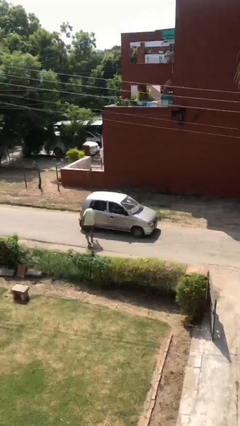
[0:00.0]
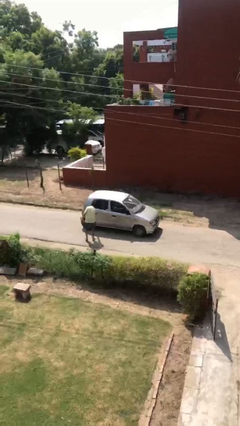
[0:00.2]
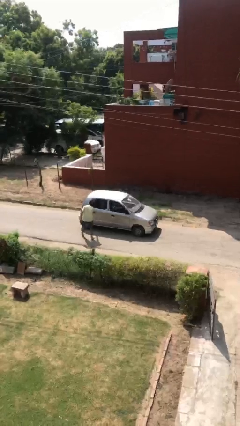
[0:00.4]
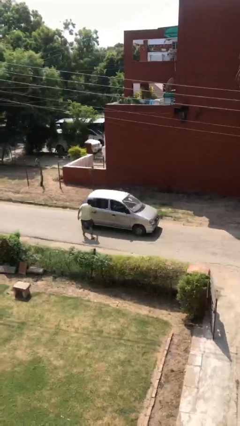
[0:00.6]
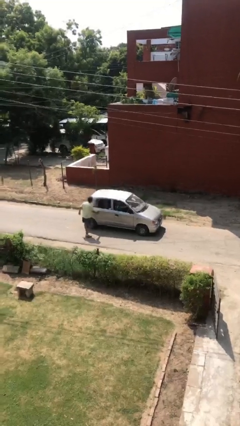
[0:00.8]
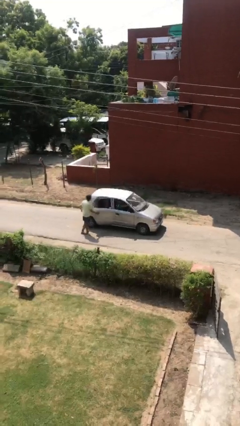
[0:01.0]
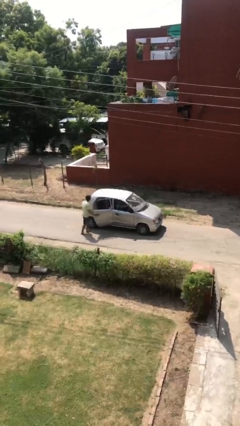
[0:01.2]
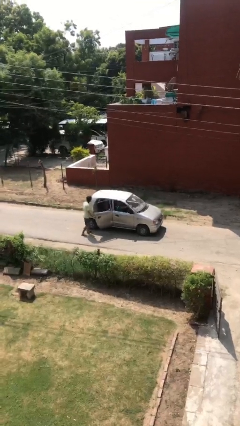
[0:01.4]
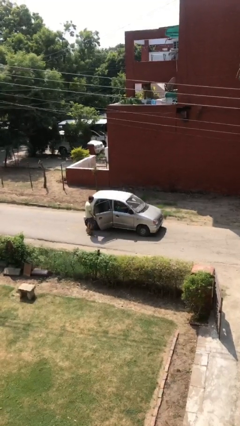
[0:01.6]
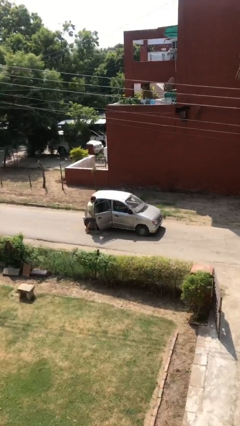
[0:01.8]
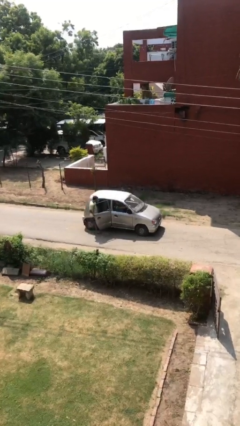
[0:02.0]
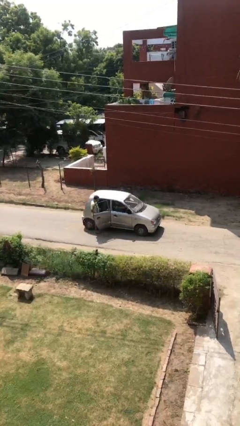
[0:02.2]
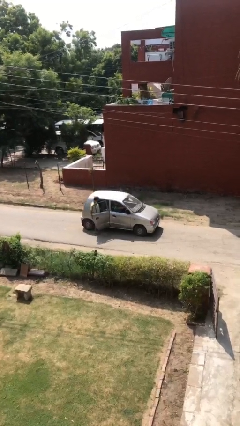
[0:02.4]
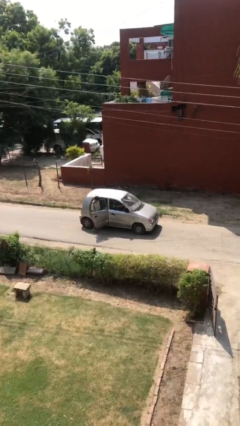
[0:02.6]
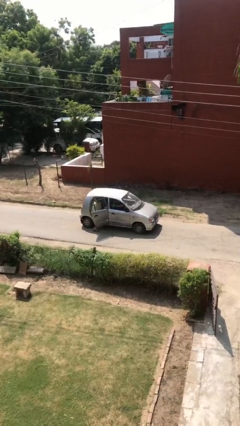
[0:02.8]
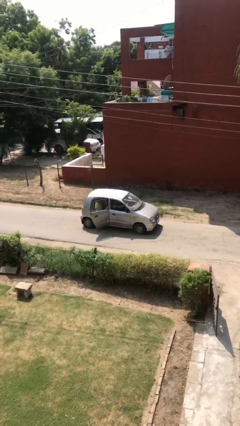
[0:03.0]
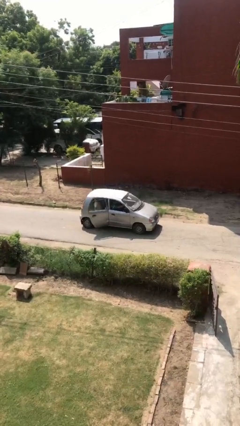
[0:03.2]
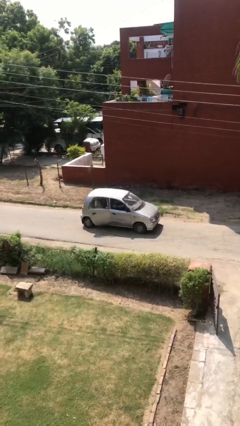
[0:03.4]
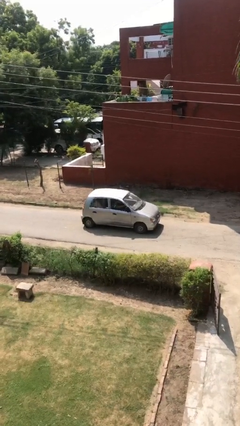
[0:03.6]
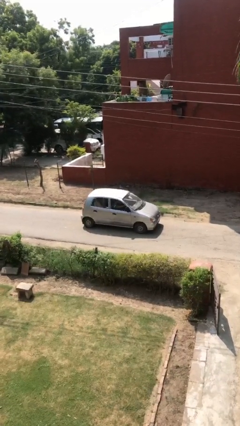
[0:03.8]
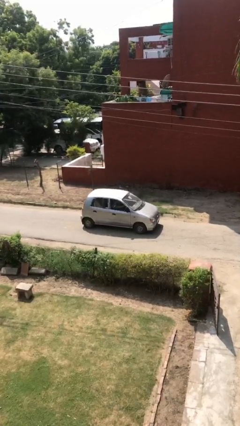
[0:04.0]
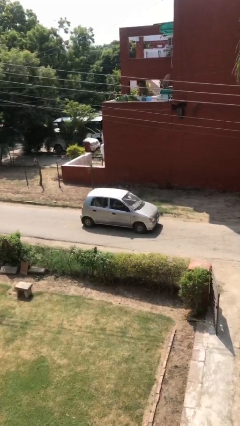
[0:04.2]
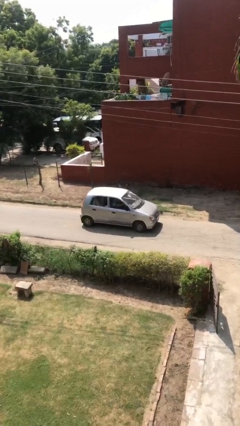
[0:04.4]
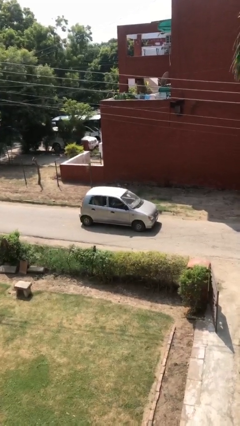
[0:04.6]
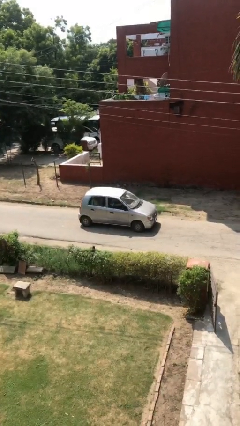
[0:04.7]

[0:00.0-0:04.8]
car picks up person

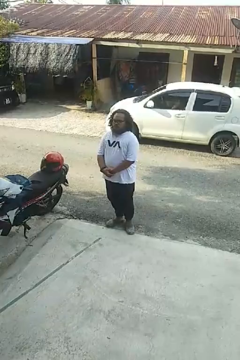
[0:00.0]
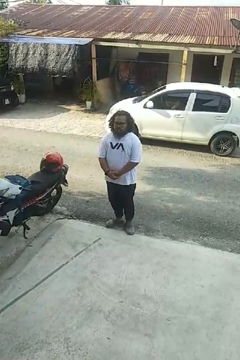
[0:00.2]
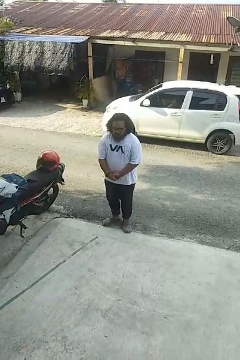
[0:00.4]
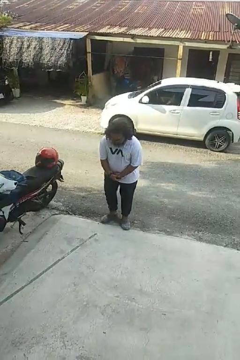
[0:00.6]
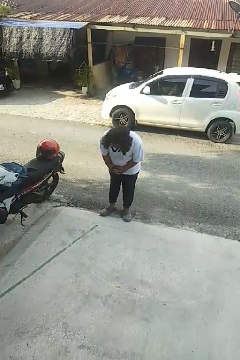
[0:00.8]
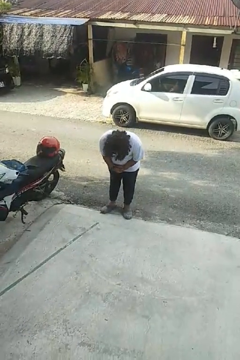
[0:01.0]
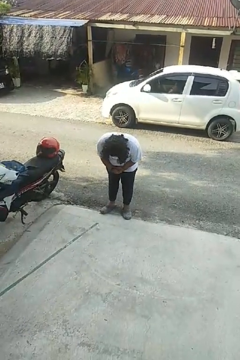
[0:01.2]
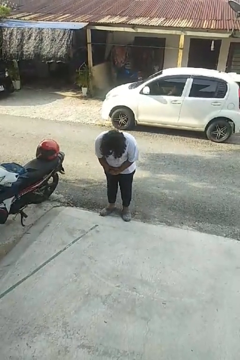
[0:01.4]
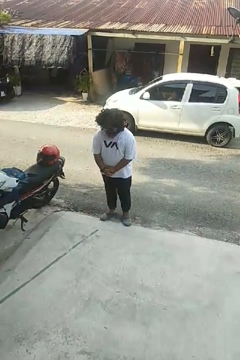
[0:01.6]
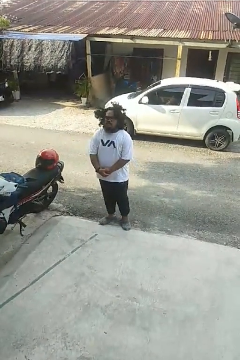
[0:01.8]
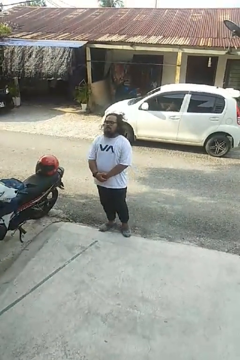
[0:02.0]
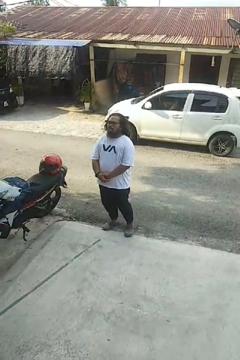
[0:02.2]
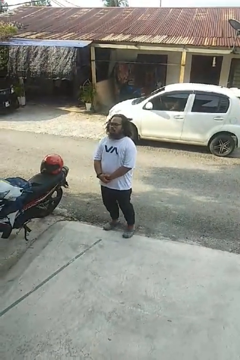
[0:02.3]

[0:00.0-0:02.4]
person bows

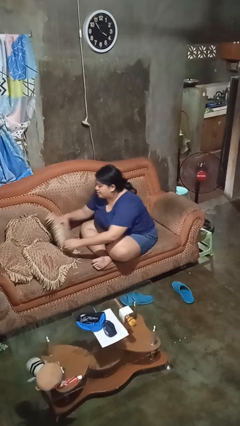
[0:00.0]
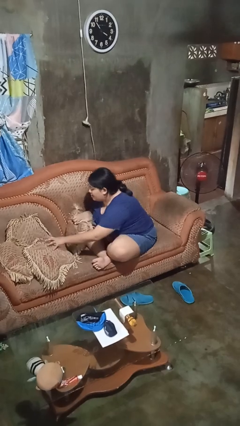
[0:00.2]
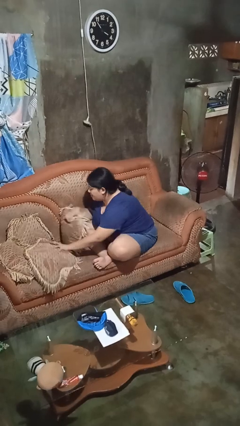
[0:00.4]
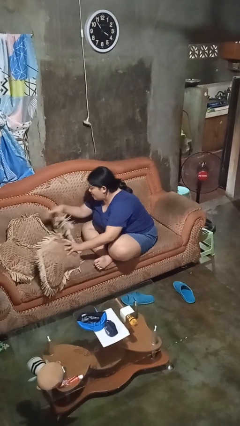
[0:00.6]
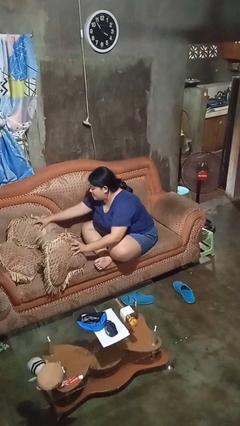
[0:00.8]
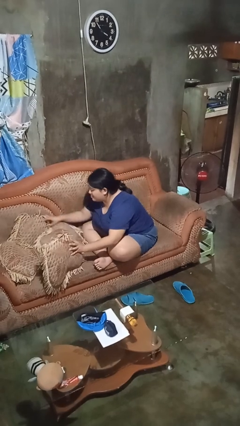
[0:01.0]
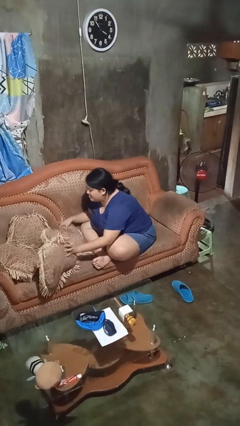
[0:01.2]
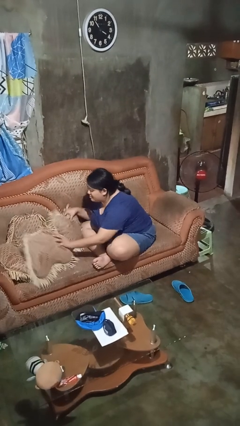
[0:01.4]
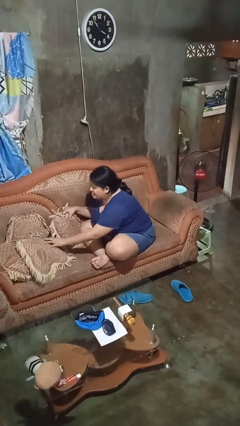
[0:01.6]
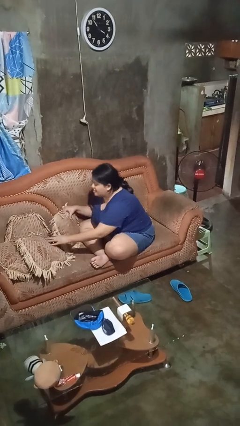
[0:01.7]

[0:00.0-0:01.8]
person searches in couch

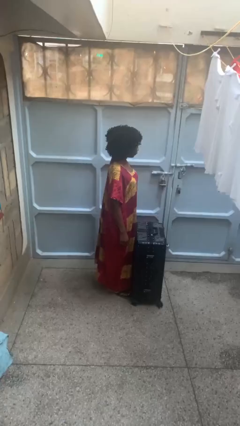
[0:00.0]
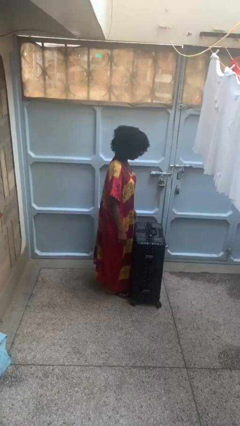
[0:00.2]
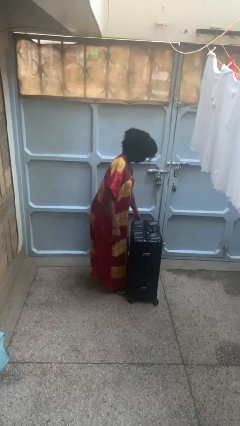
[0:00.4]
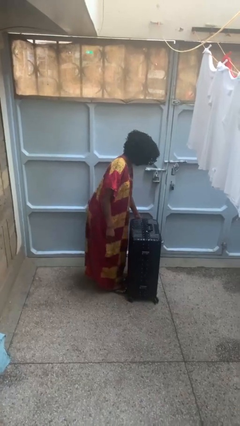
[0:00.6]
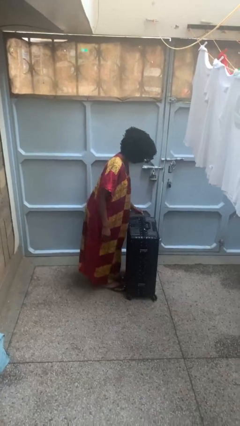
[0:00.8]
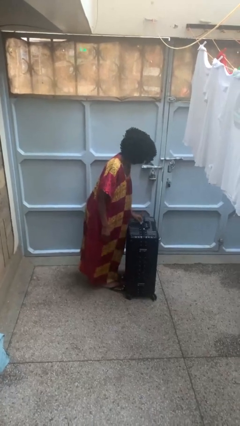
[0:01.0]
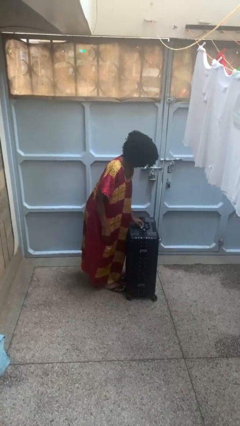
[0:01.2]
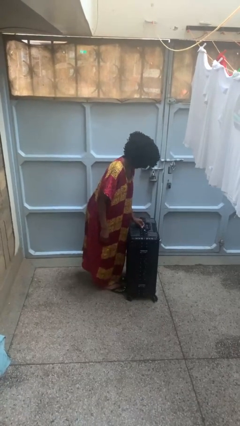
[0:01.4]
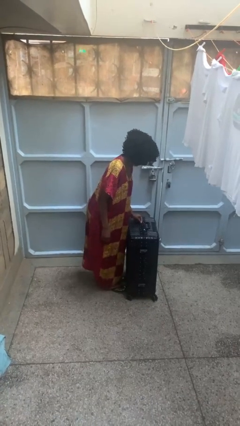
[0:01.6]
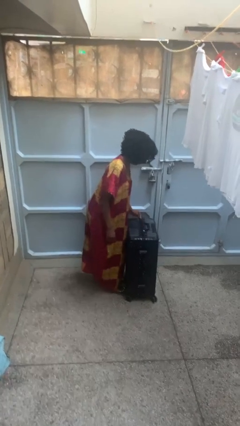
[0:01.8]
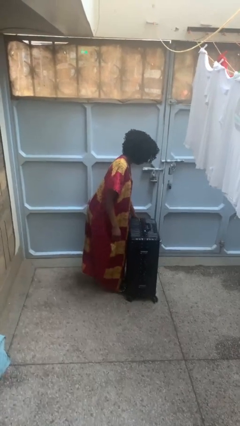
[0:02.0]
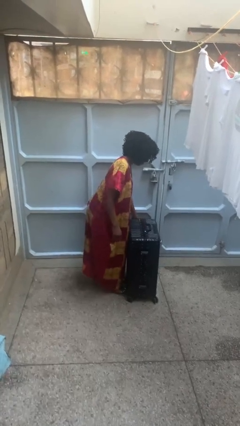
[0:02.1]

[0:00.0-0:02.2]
person opens suitcase

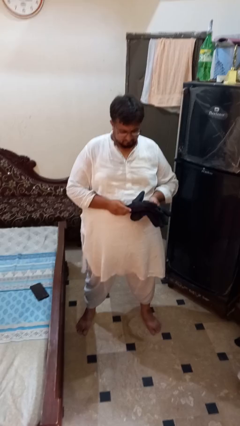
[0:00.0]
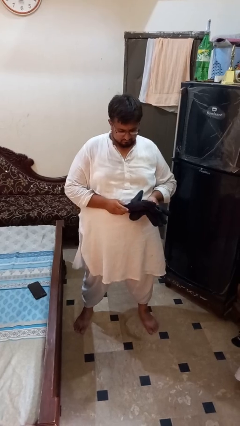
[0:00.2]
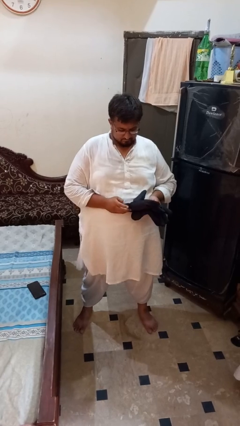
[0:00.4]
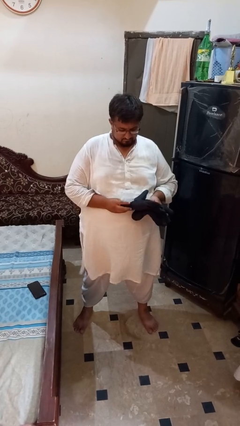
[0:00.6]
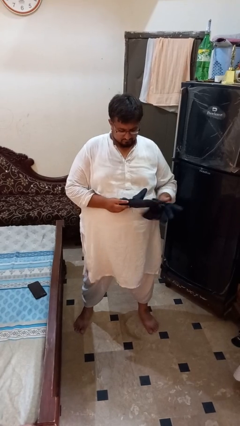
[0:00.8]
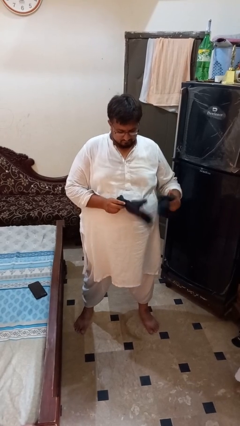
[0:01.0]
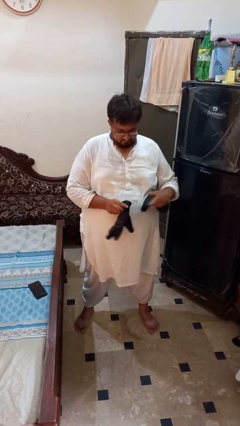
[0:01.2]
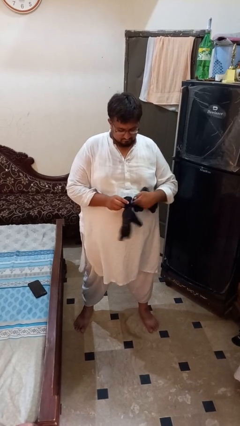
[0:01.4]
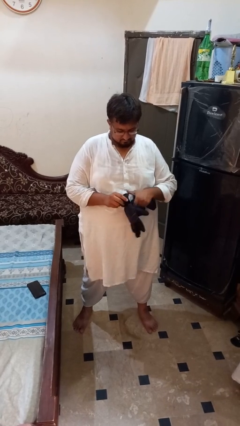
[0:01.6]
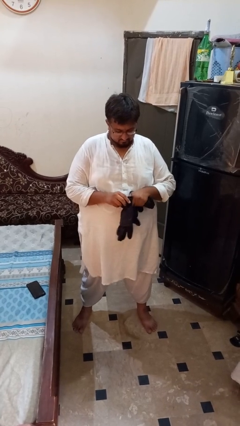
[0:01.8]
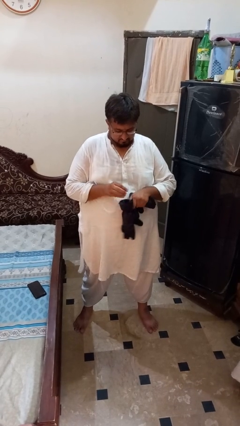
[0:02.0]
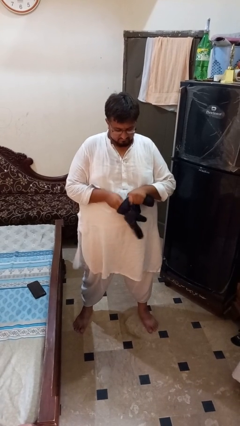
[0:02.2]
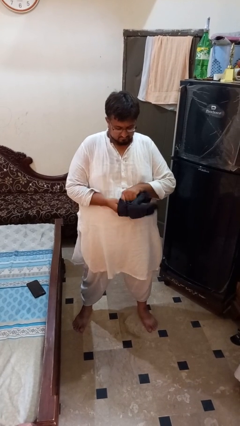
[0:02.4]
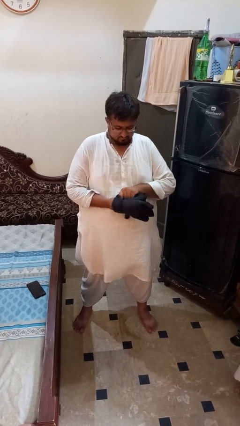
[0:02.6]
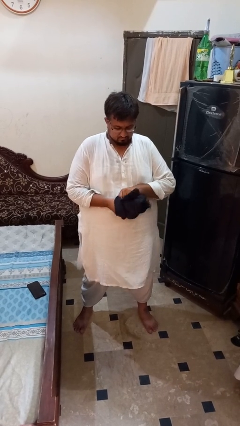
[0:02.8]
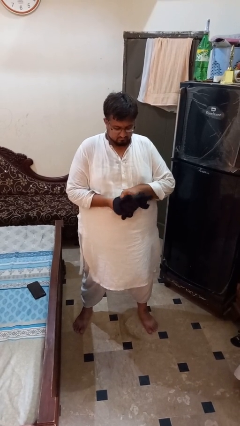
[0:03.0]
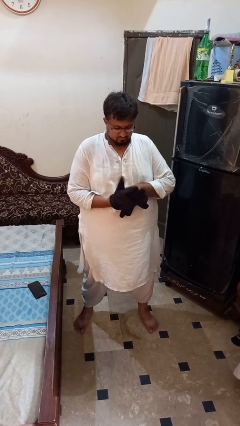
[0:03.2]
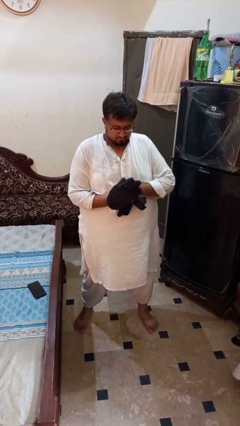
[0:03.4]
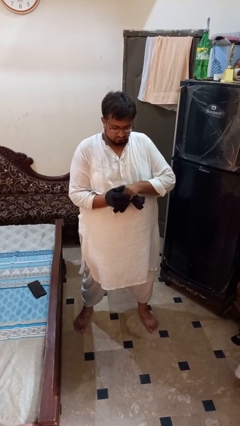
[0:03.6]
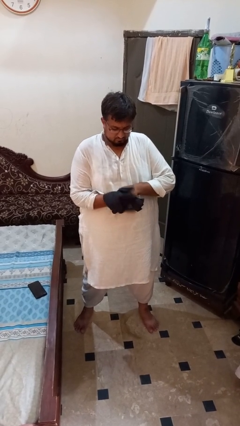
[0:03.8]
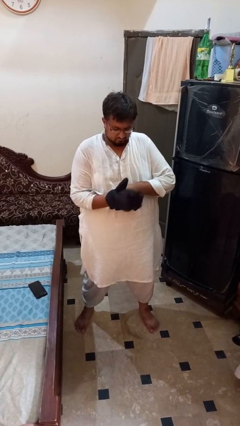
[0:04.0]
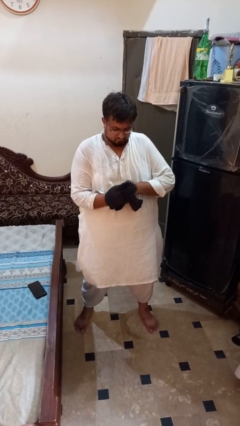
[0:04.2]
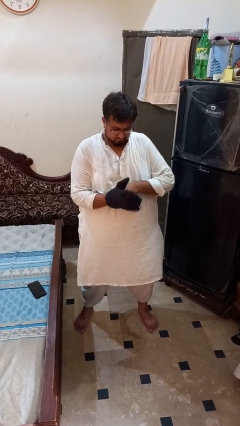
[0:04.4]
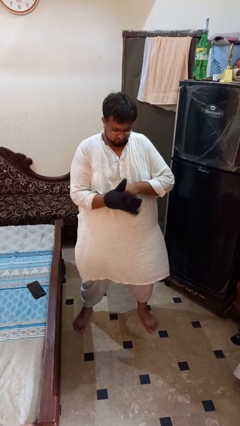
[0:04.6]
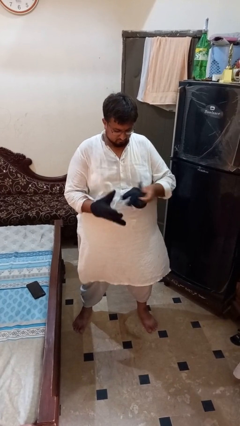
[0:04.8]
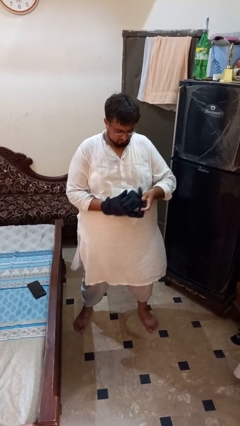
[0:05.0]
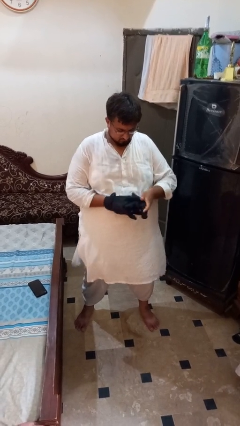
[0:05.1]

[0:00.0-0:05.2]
person puts on gloves

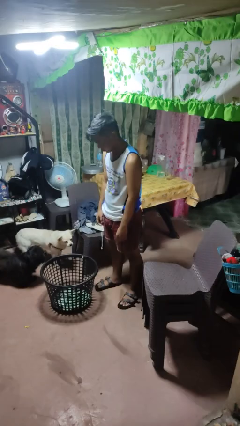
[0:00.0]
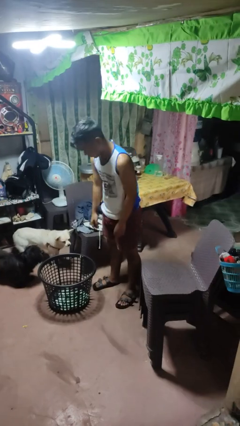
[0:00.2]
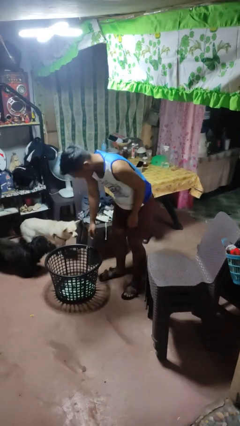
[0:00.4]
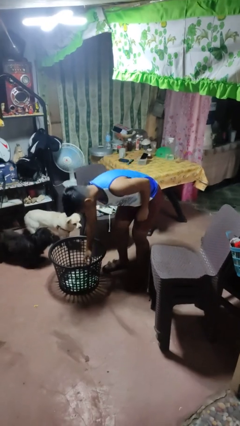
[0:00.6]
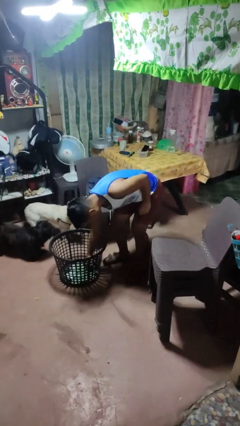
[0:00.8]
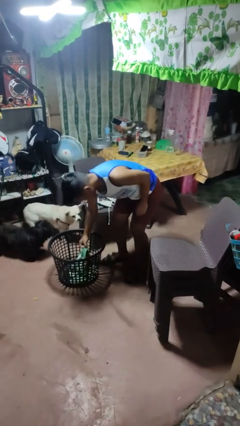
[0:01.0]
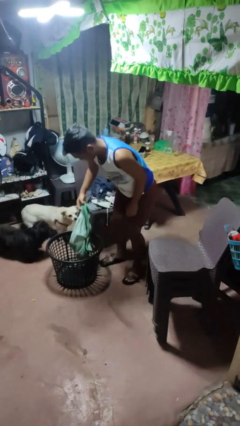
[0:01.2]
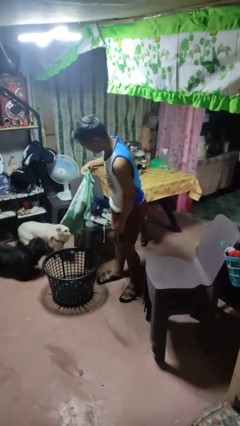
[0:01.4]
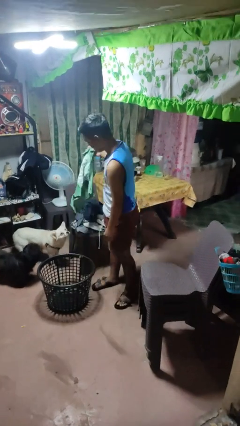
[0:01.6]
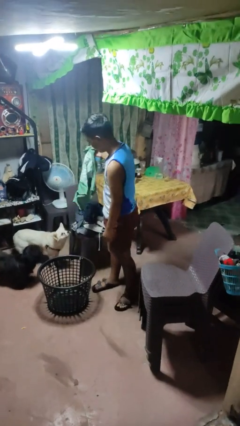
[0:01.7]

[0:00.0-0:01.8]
person takes object from basket
